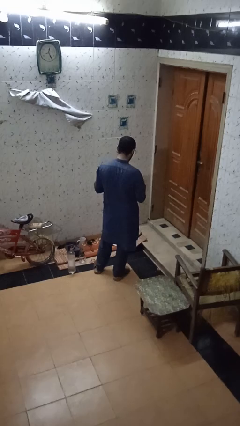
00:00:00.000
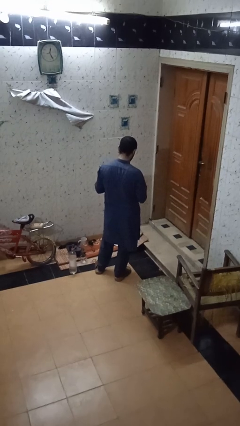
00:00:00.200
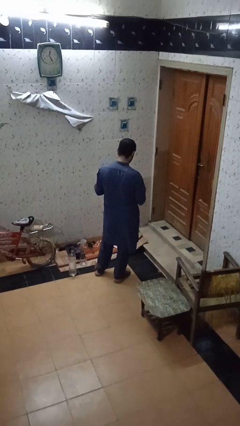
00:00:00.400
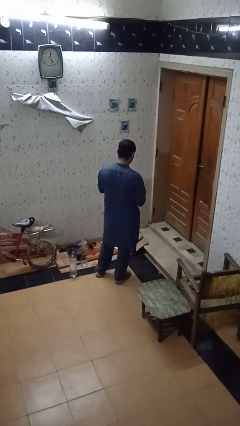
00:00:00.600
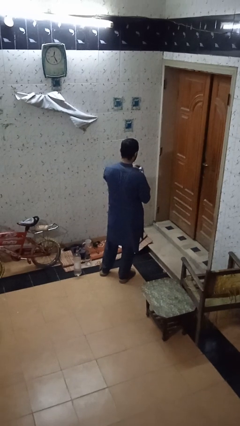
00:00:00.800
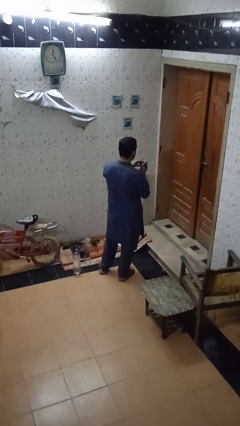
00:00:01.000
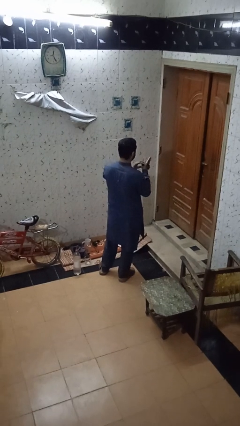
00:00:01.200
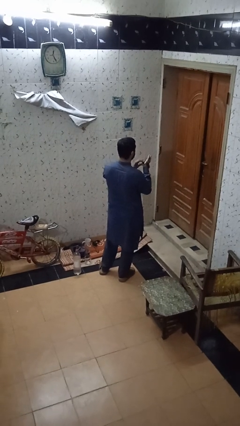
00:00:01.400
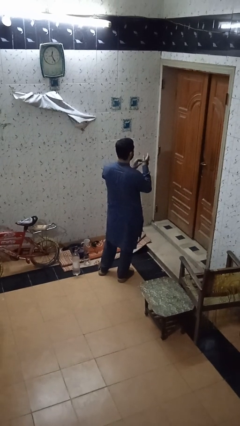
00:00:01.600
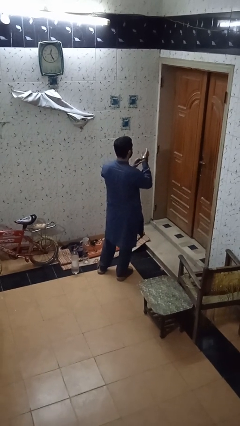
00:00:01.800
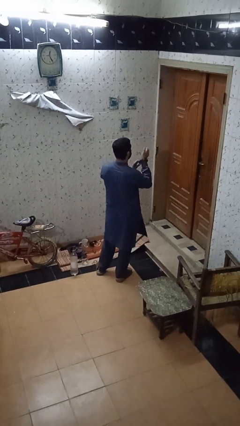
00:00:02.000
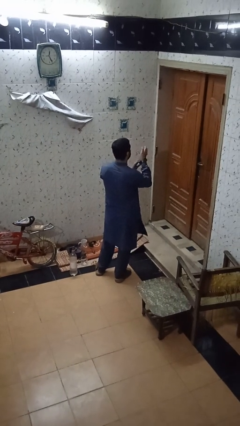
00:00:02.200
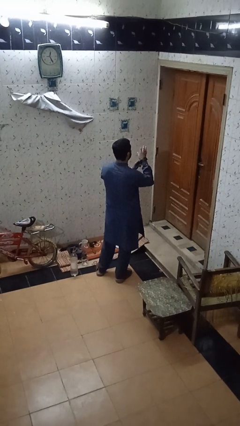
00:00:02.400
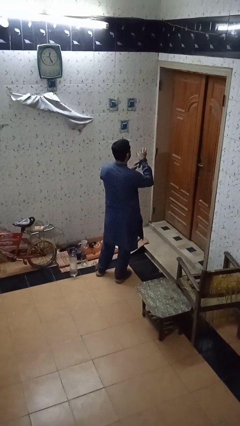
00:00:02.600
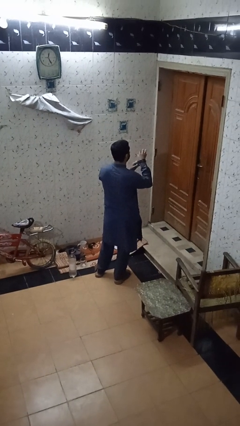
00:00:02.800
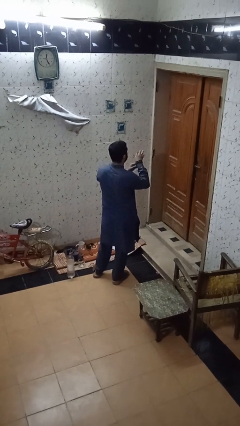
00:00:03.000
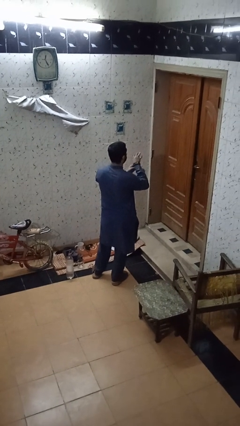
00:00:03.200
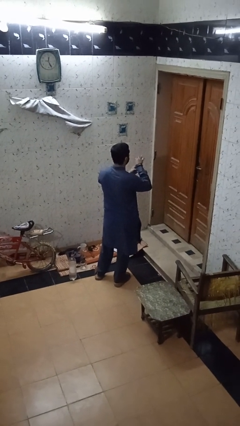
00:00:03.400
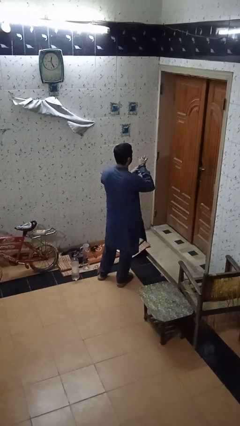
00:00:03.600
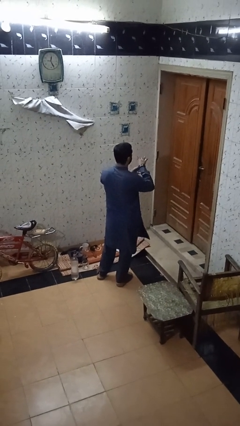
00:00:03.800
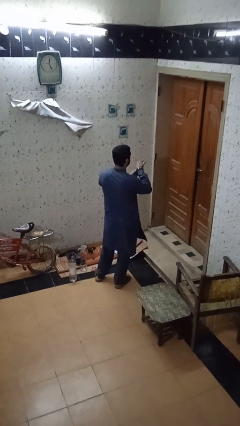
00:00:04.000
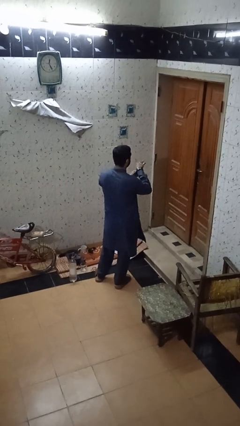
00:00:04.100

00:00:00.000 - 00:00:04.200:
person puts on wristwatch

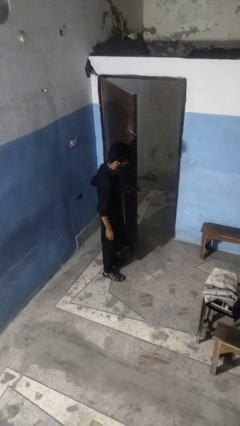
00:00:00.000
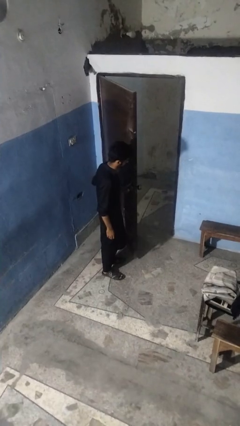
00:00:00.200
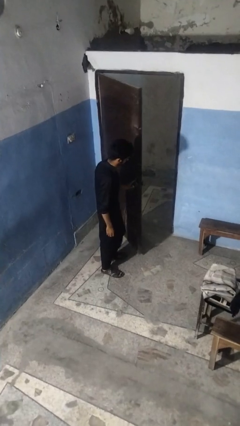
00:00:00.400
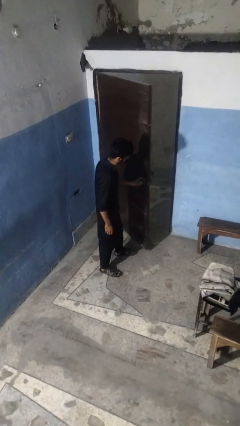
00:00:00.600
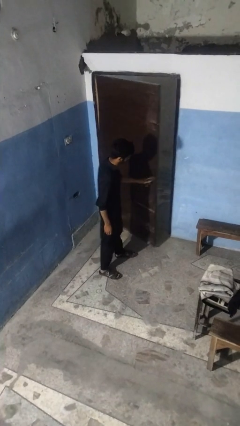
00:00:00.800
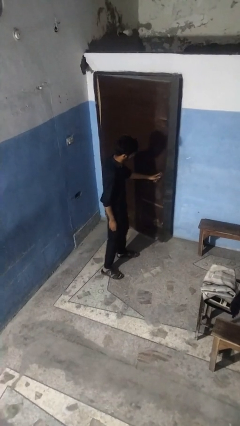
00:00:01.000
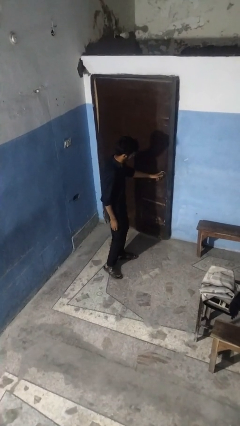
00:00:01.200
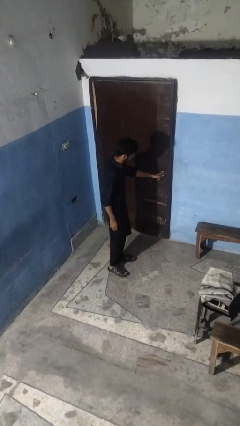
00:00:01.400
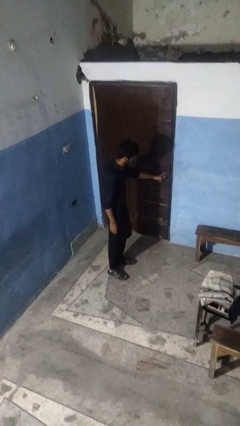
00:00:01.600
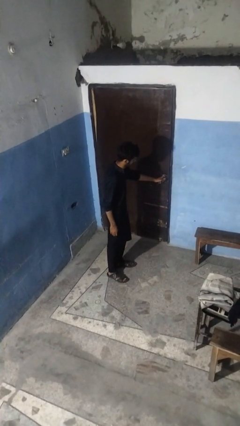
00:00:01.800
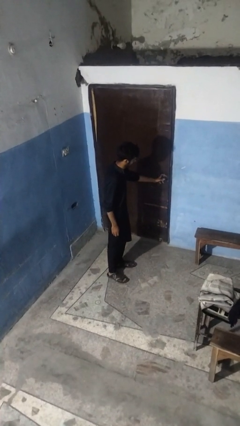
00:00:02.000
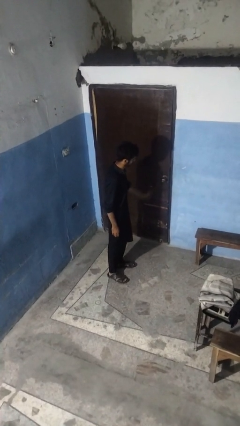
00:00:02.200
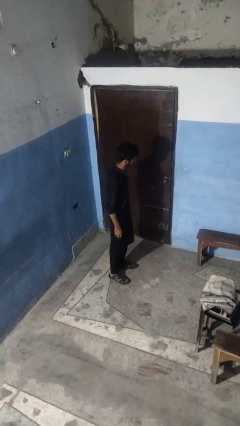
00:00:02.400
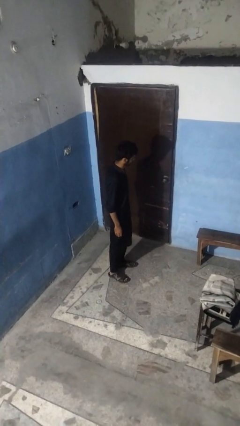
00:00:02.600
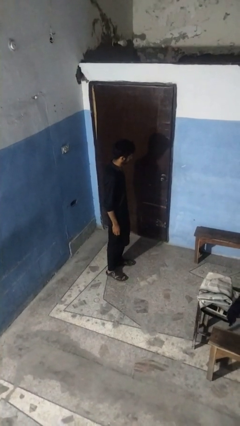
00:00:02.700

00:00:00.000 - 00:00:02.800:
person closes facility door

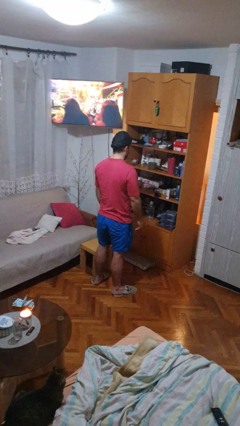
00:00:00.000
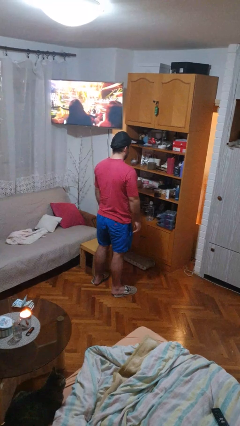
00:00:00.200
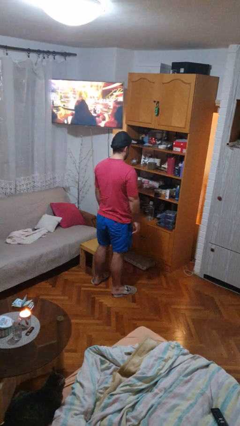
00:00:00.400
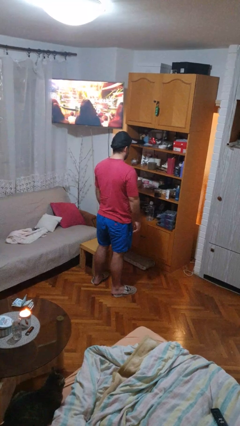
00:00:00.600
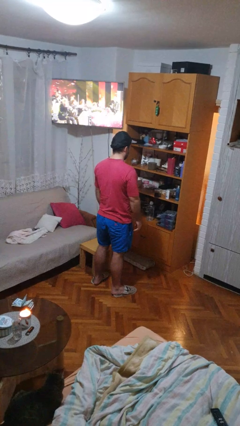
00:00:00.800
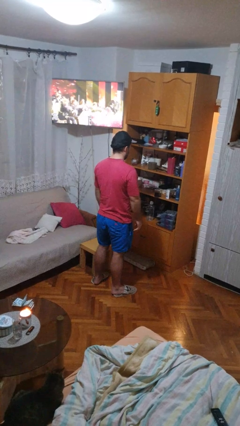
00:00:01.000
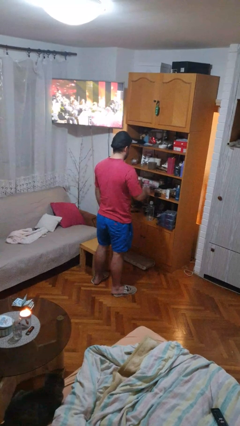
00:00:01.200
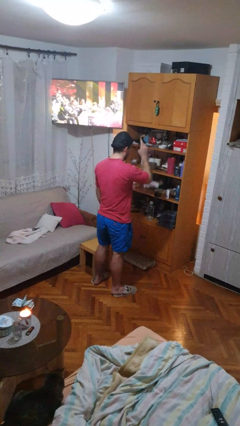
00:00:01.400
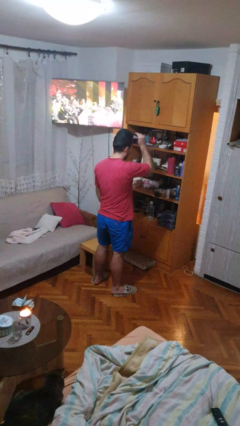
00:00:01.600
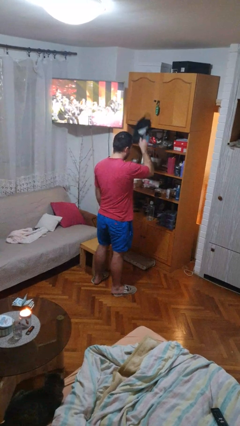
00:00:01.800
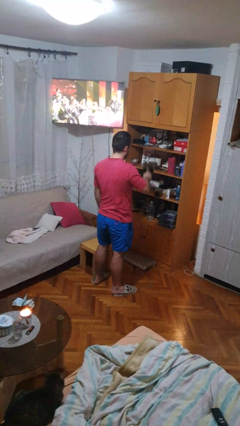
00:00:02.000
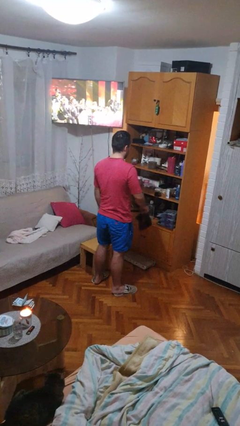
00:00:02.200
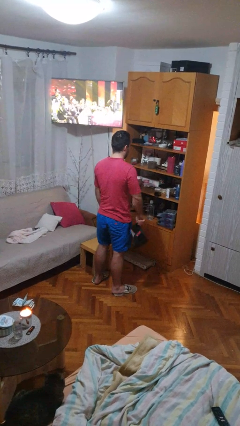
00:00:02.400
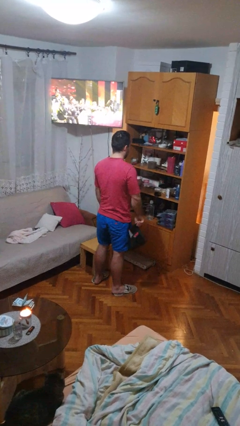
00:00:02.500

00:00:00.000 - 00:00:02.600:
person takes off hat

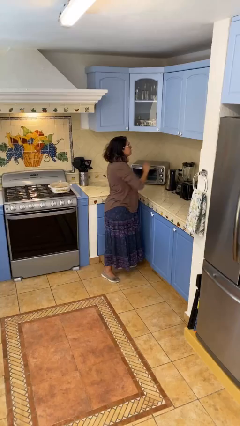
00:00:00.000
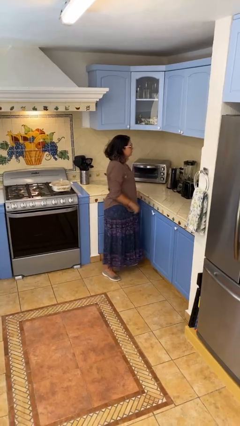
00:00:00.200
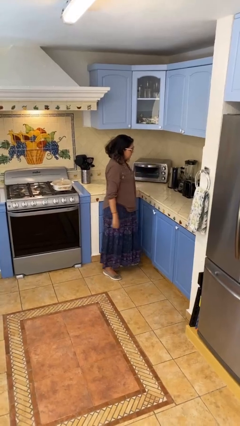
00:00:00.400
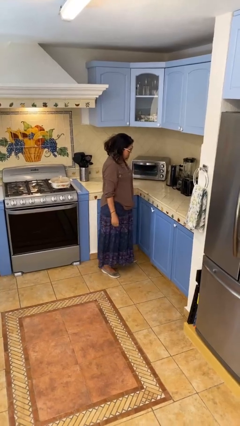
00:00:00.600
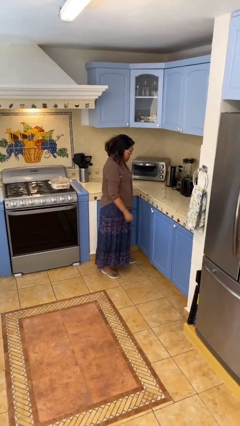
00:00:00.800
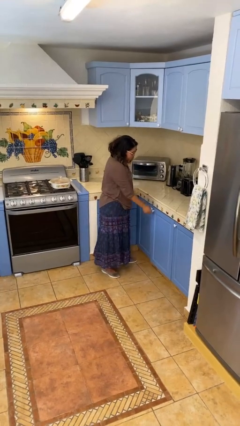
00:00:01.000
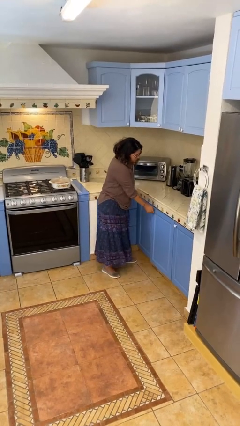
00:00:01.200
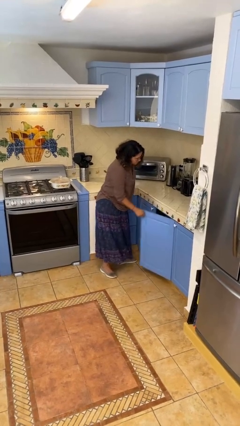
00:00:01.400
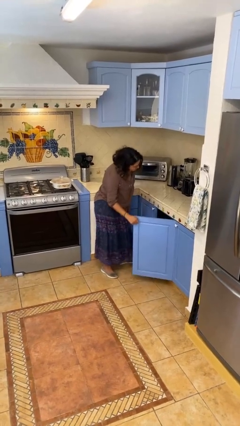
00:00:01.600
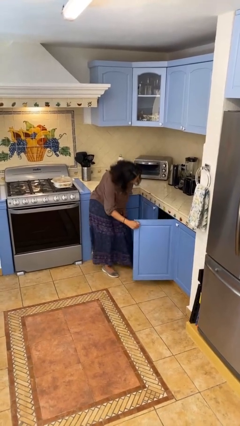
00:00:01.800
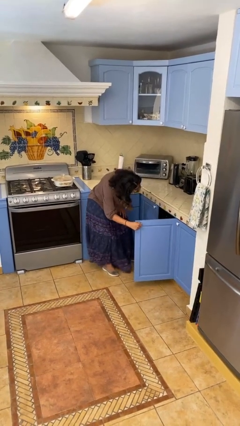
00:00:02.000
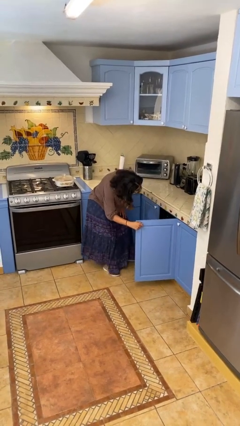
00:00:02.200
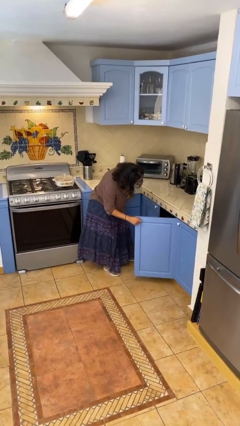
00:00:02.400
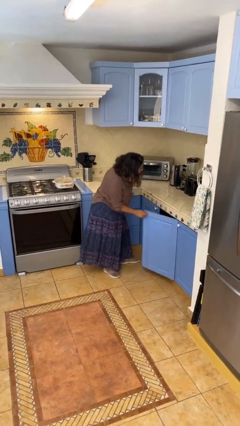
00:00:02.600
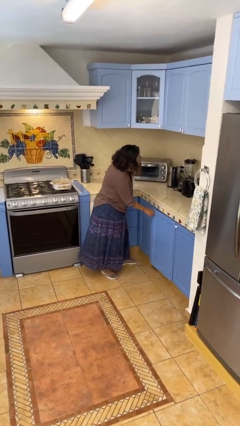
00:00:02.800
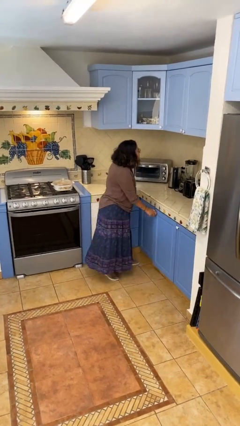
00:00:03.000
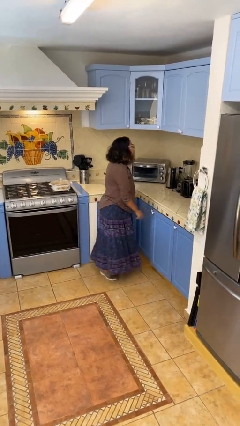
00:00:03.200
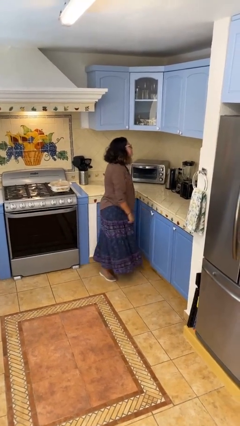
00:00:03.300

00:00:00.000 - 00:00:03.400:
person closes cabinet

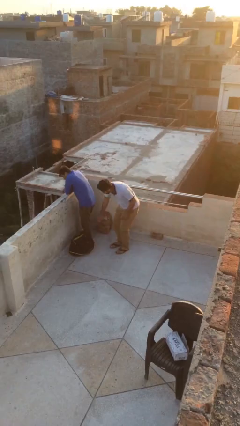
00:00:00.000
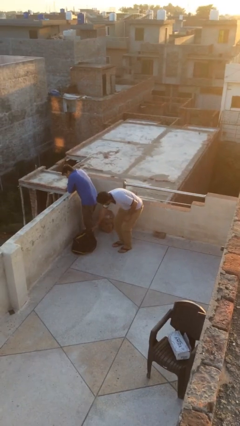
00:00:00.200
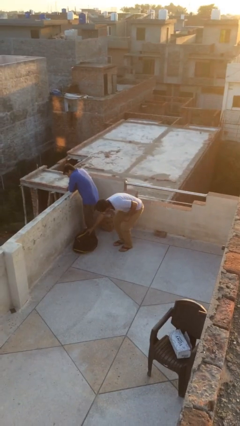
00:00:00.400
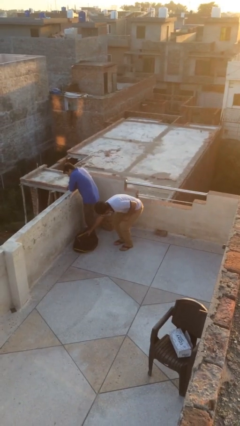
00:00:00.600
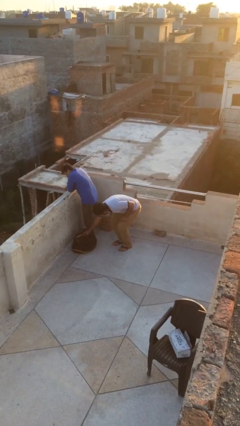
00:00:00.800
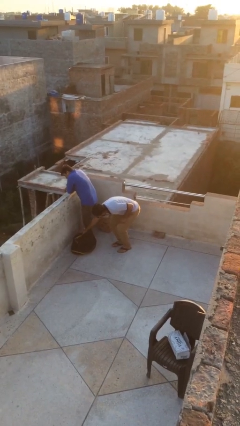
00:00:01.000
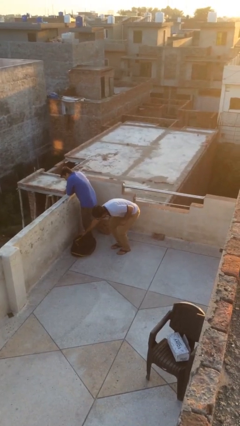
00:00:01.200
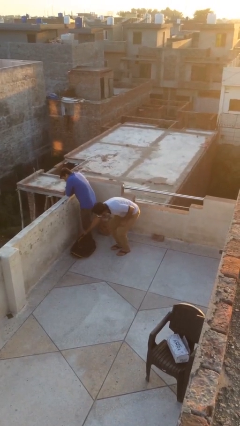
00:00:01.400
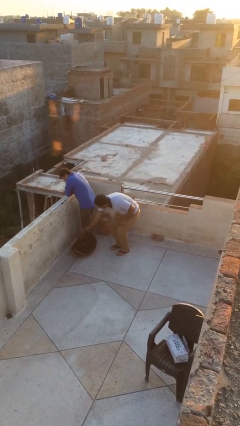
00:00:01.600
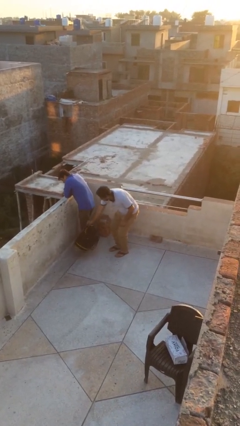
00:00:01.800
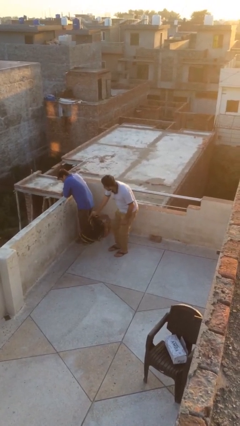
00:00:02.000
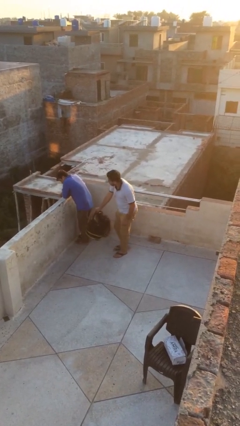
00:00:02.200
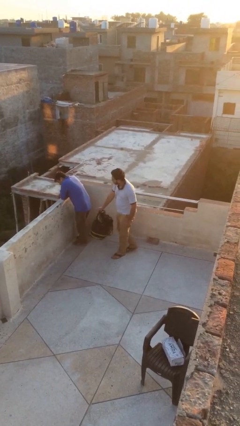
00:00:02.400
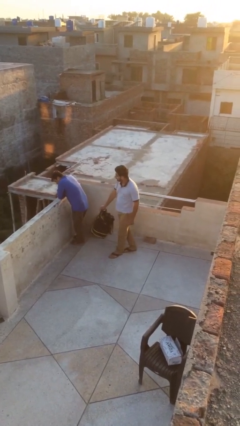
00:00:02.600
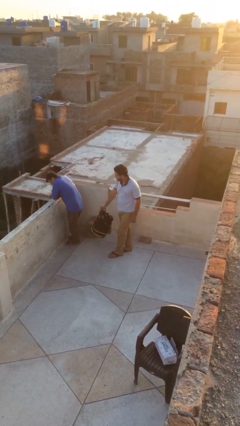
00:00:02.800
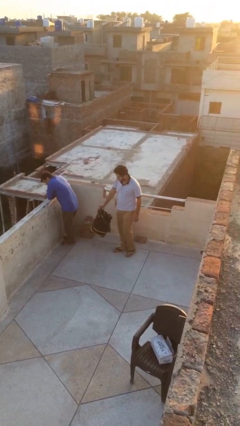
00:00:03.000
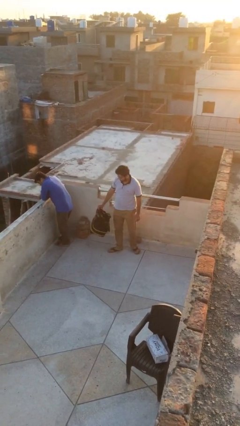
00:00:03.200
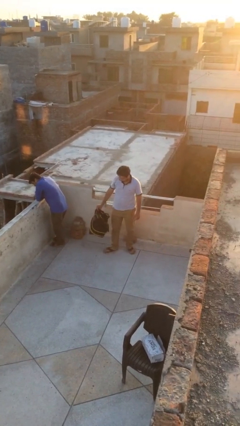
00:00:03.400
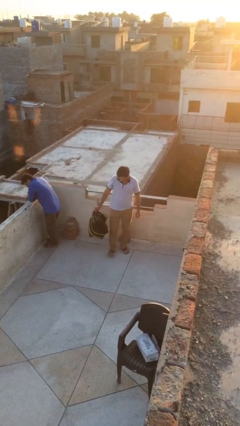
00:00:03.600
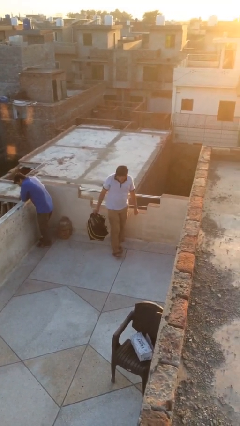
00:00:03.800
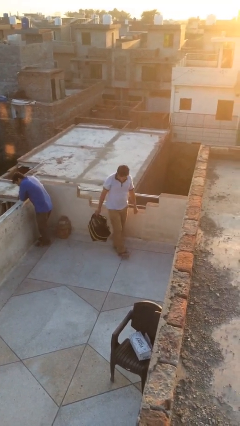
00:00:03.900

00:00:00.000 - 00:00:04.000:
person steals object from person

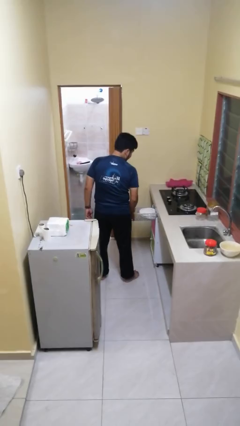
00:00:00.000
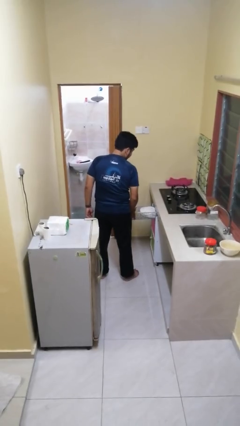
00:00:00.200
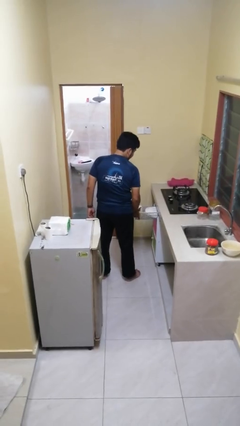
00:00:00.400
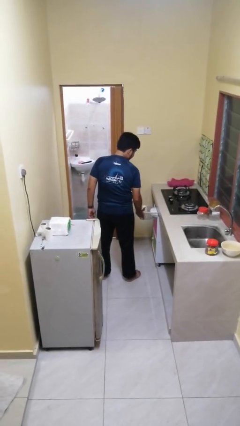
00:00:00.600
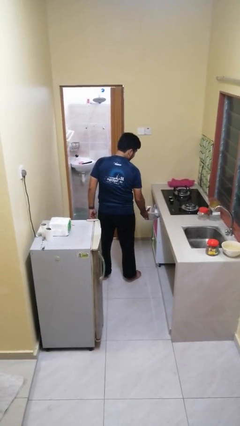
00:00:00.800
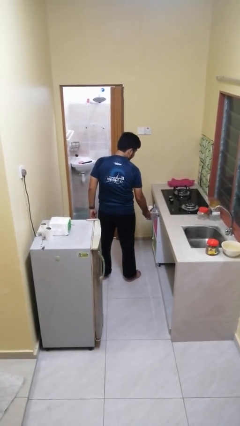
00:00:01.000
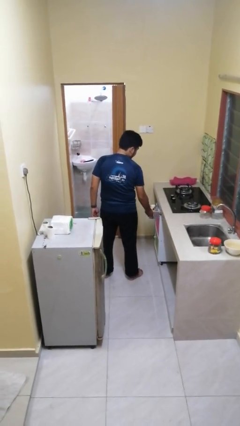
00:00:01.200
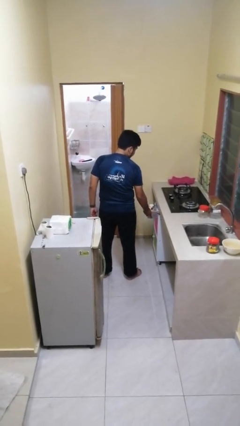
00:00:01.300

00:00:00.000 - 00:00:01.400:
person closes kitchen drawer
